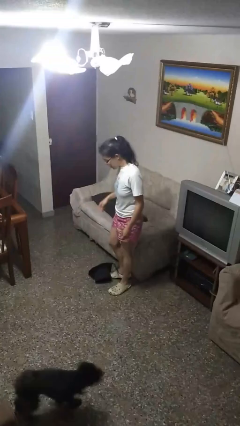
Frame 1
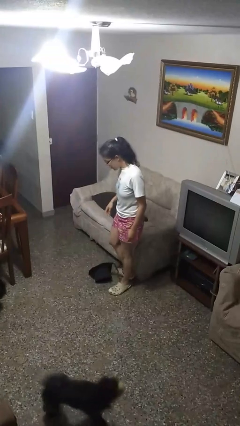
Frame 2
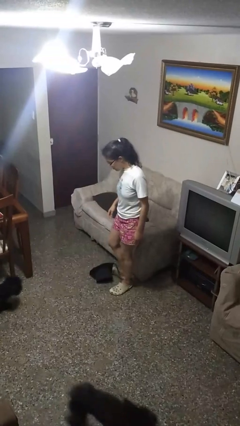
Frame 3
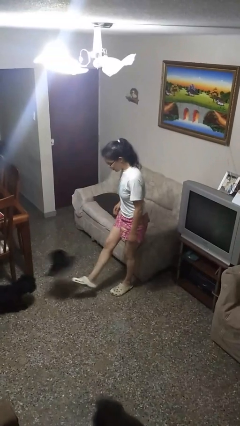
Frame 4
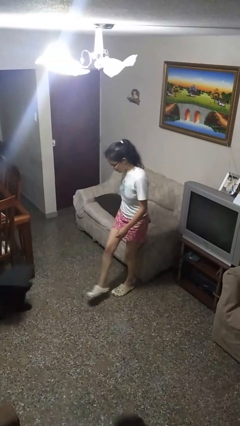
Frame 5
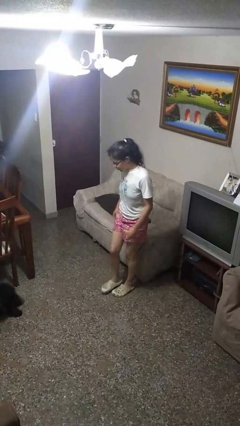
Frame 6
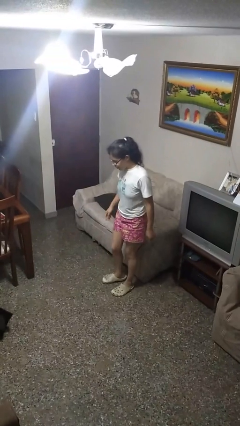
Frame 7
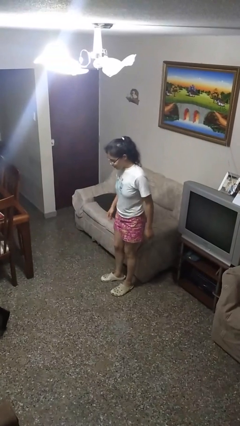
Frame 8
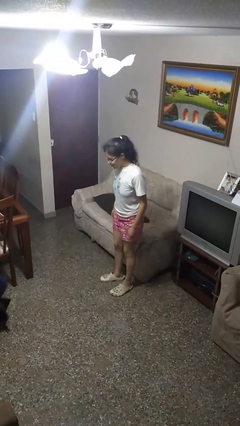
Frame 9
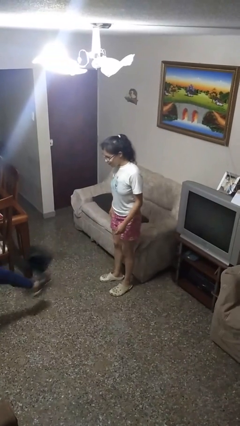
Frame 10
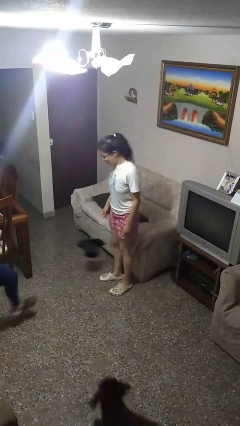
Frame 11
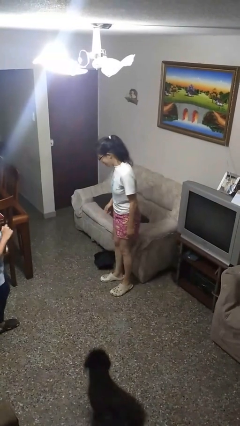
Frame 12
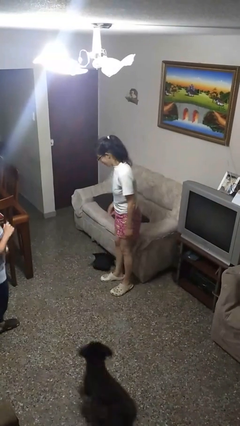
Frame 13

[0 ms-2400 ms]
person kicks object to person

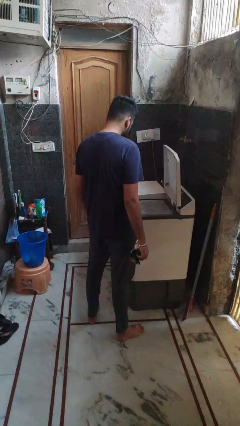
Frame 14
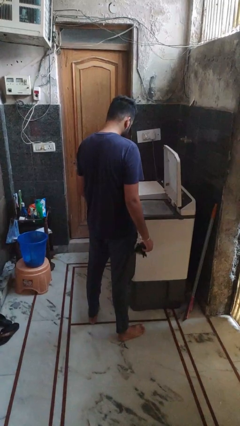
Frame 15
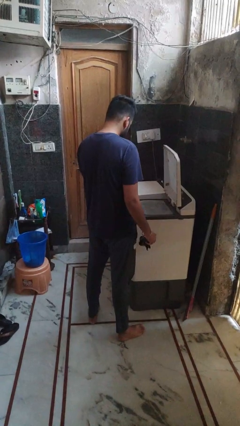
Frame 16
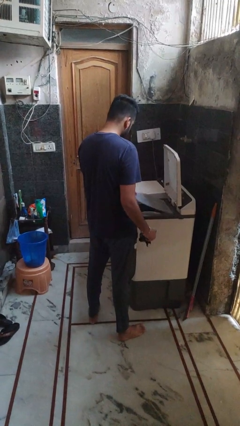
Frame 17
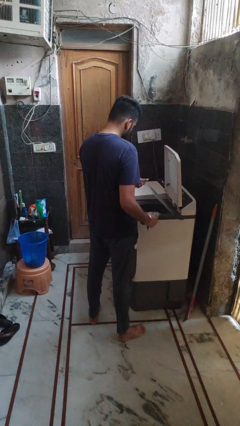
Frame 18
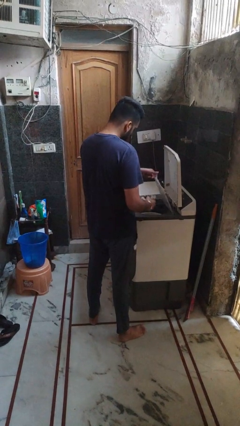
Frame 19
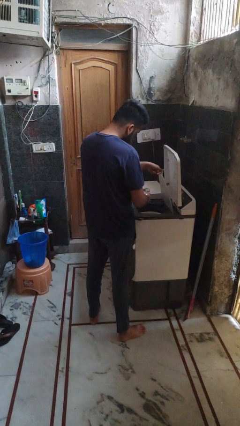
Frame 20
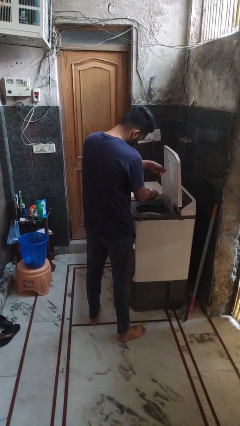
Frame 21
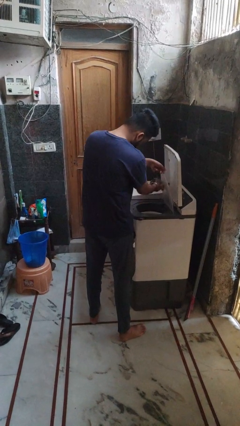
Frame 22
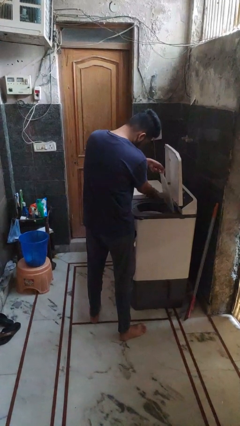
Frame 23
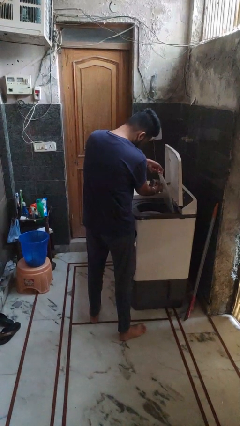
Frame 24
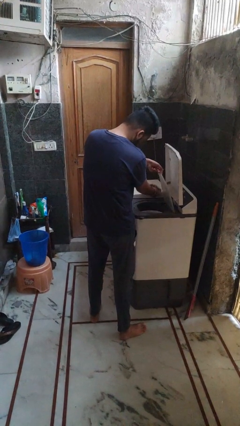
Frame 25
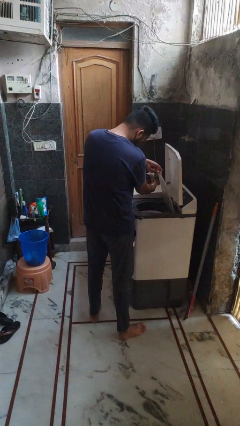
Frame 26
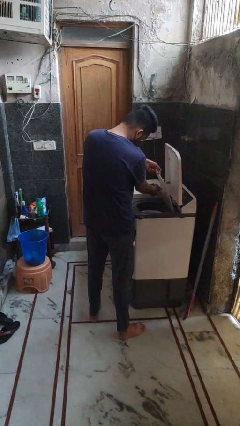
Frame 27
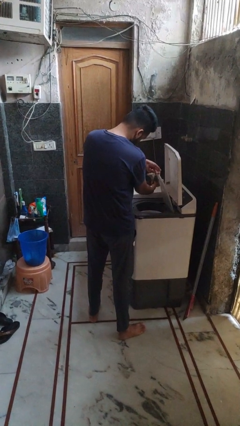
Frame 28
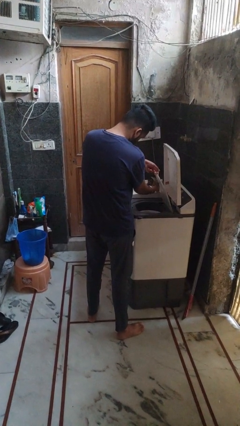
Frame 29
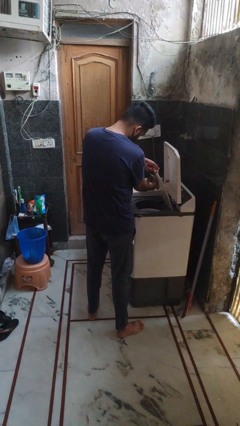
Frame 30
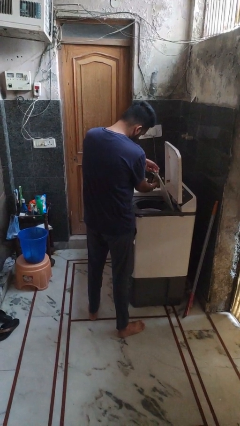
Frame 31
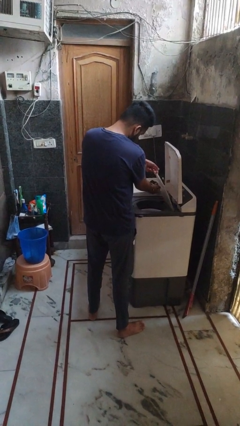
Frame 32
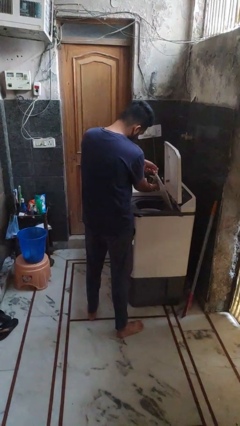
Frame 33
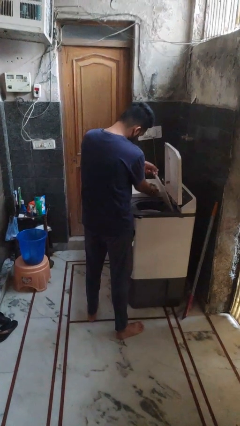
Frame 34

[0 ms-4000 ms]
person cleans dryer lint trap

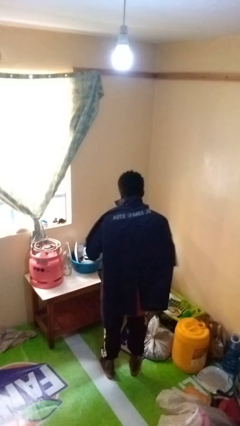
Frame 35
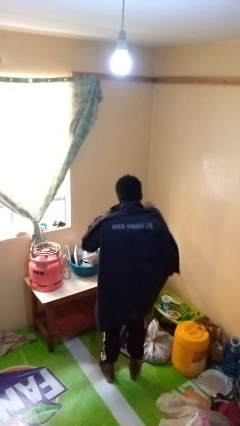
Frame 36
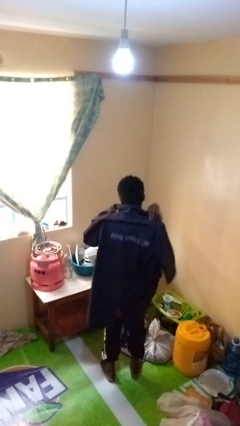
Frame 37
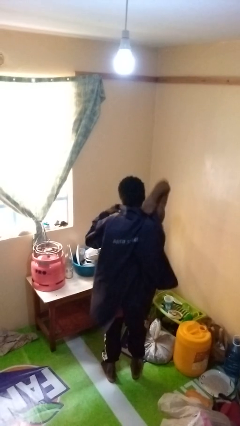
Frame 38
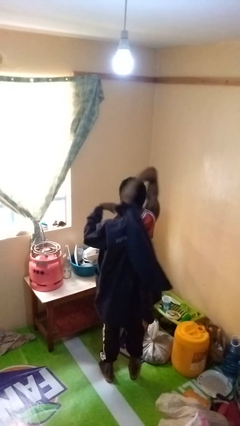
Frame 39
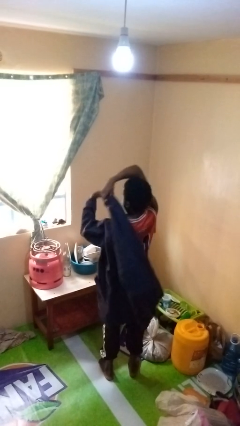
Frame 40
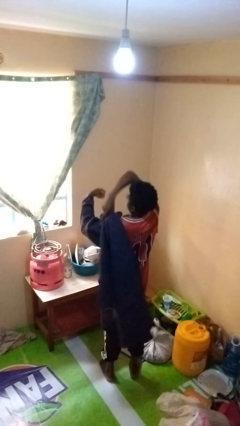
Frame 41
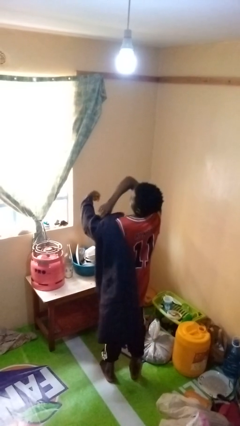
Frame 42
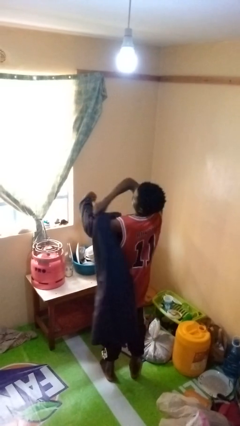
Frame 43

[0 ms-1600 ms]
person takes off apron

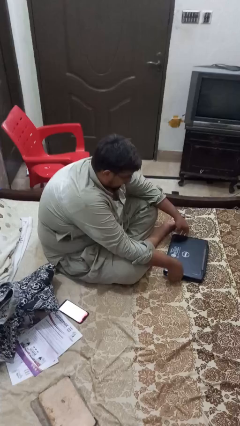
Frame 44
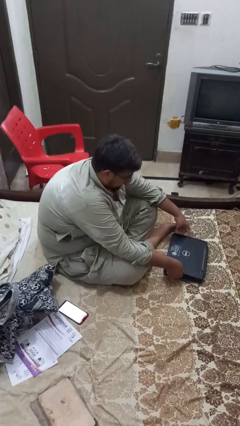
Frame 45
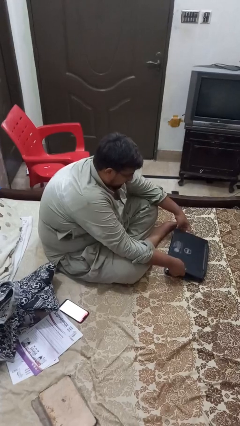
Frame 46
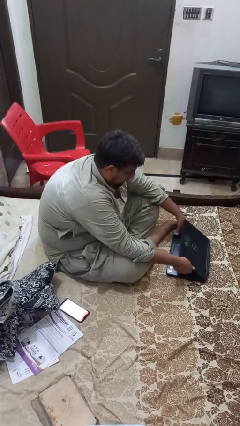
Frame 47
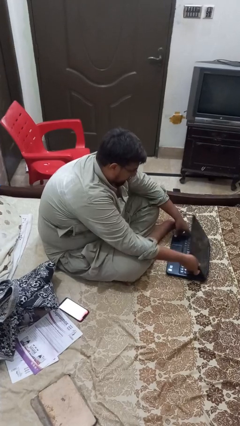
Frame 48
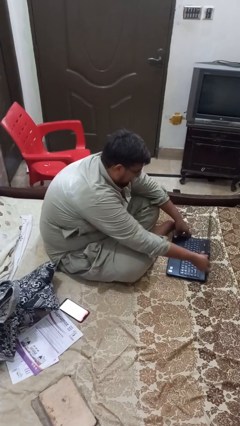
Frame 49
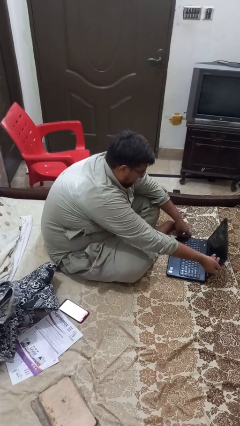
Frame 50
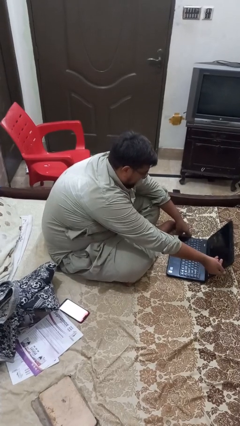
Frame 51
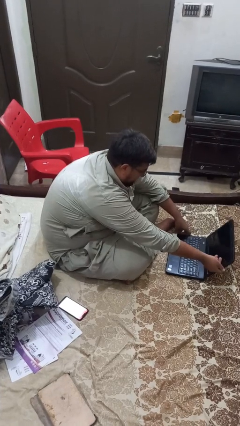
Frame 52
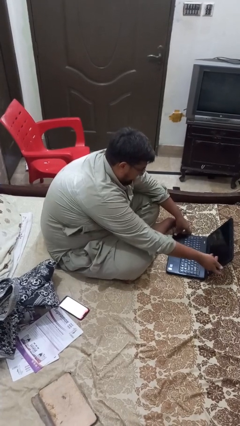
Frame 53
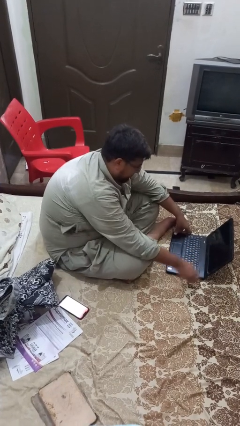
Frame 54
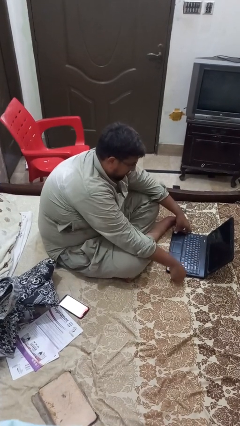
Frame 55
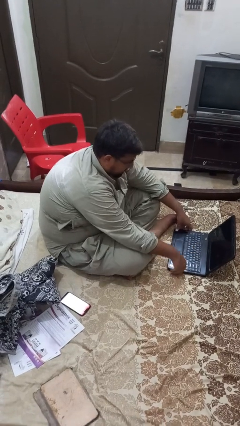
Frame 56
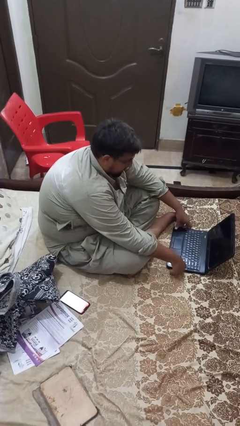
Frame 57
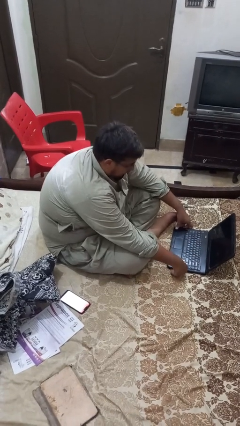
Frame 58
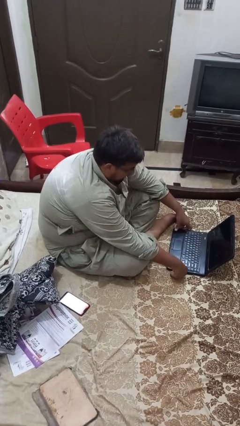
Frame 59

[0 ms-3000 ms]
person opens laptop

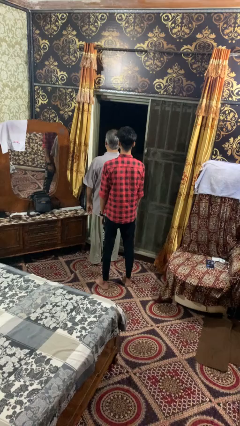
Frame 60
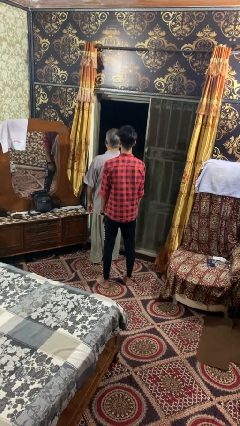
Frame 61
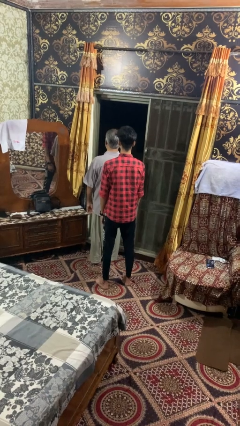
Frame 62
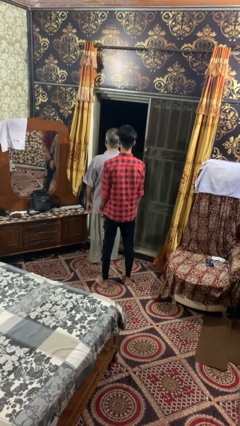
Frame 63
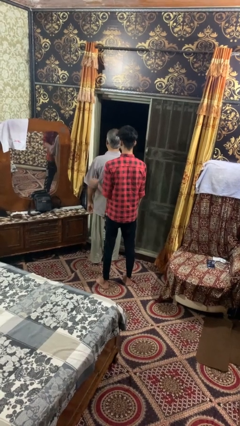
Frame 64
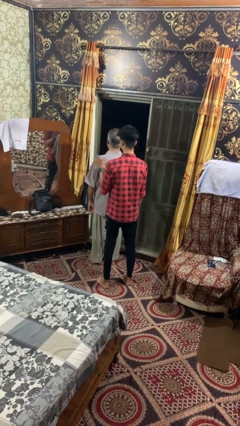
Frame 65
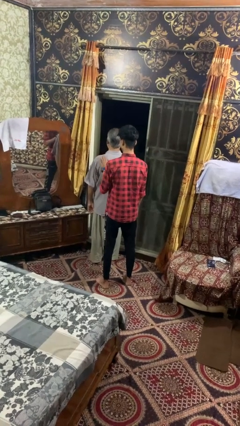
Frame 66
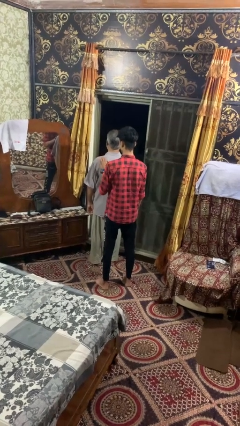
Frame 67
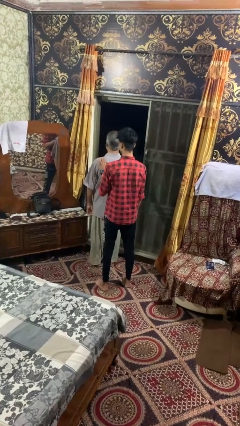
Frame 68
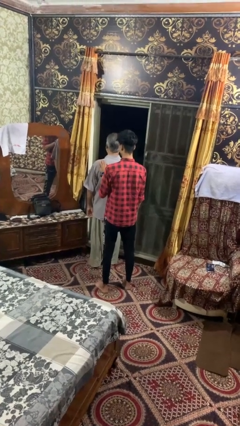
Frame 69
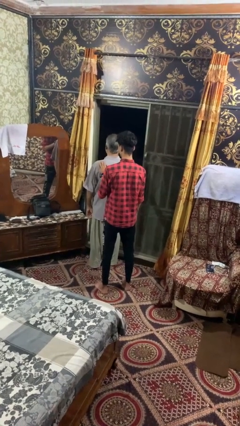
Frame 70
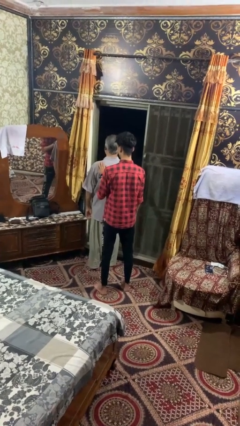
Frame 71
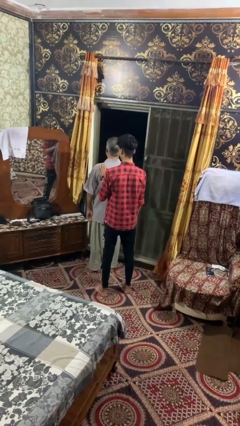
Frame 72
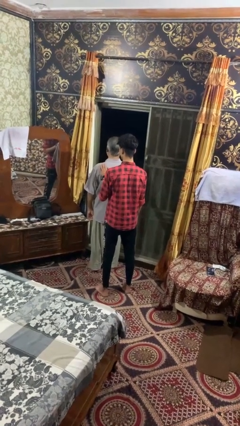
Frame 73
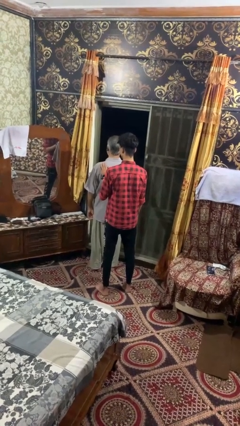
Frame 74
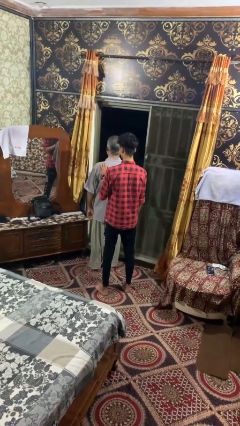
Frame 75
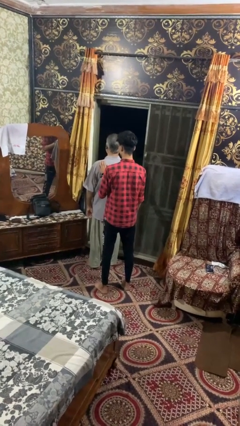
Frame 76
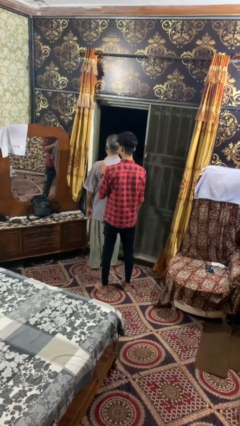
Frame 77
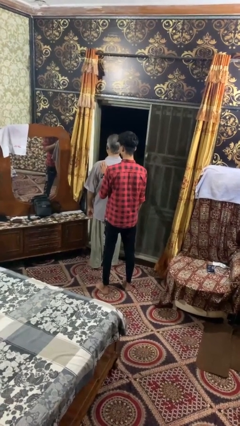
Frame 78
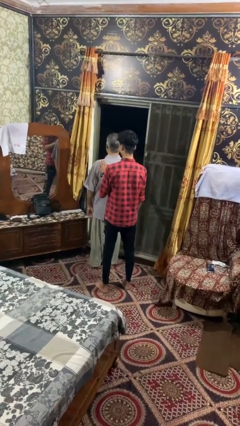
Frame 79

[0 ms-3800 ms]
person touches back of person

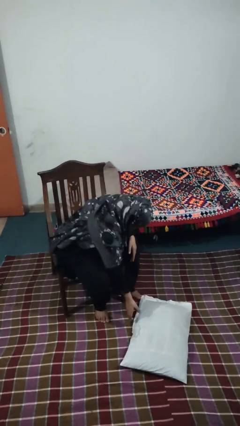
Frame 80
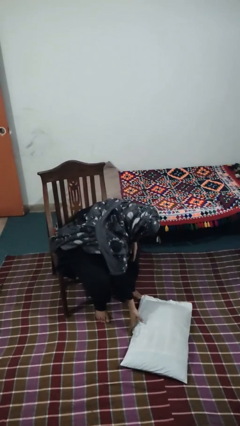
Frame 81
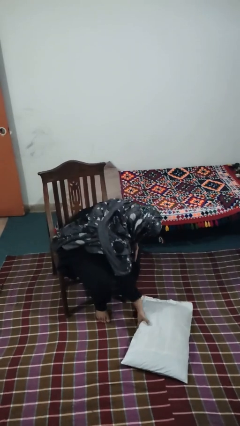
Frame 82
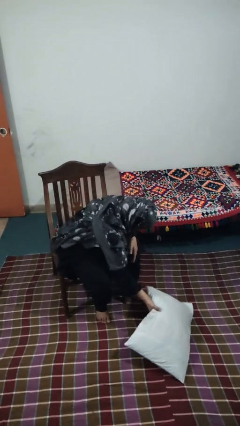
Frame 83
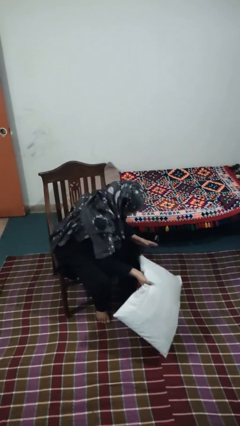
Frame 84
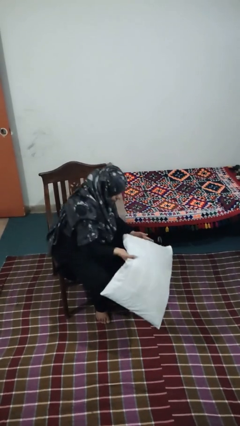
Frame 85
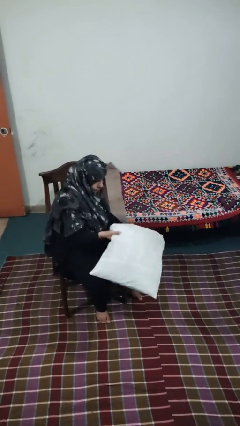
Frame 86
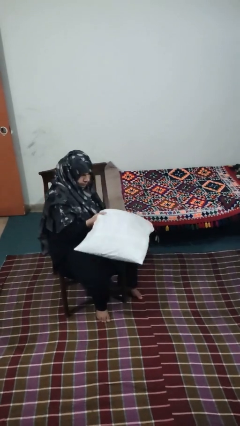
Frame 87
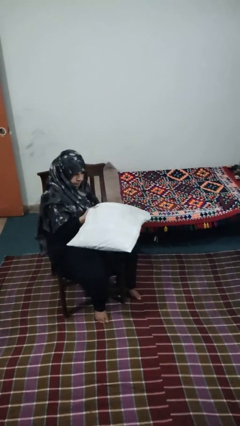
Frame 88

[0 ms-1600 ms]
person picks up object from floor

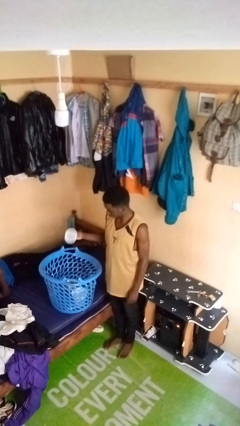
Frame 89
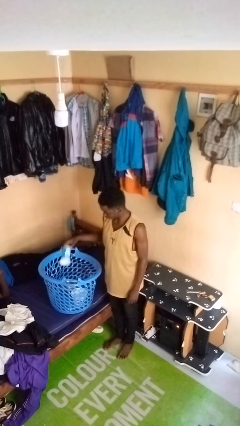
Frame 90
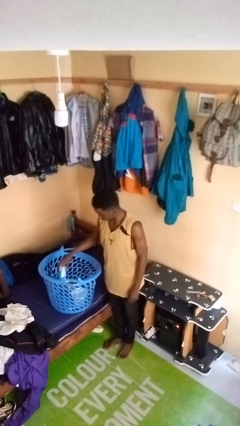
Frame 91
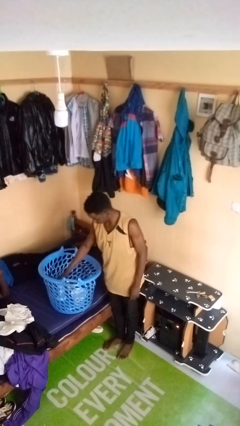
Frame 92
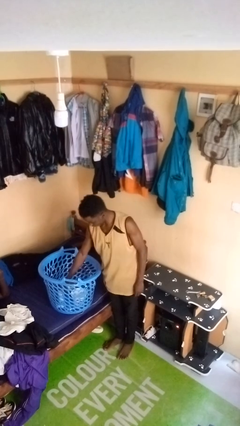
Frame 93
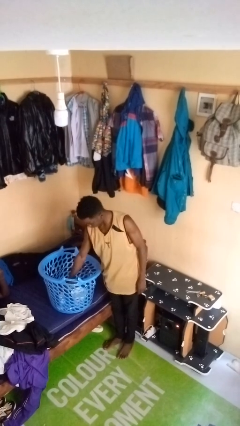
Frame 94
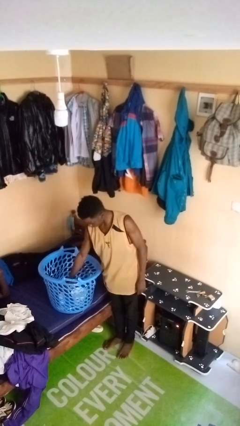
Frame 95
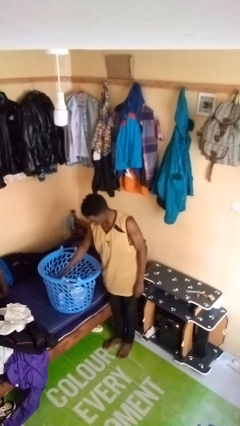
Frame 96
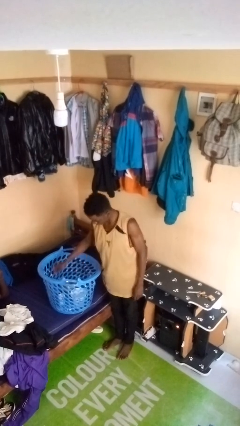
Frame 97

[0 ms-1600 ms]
person puts object into basket
